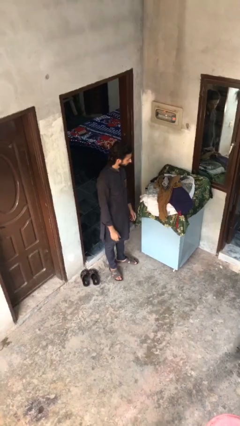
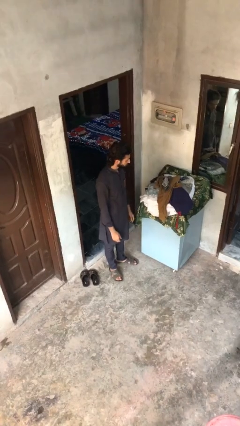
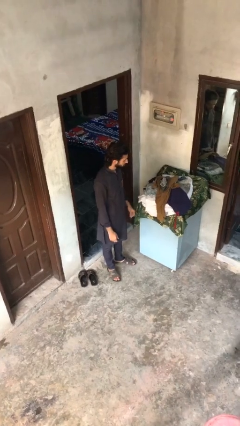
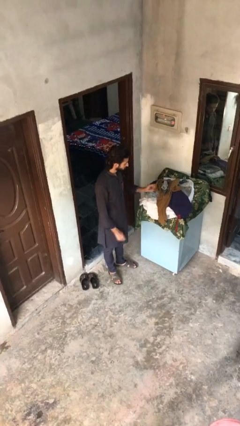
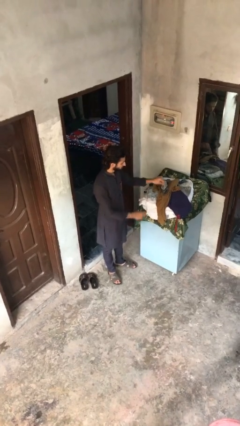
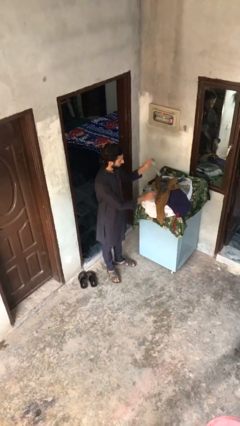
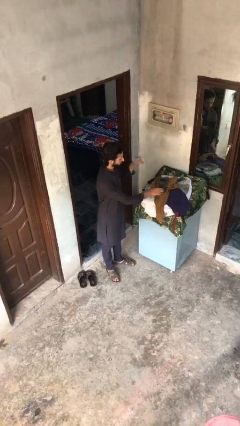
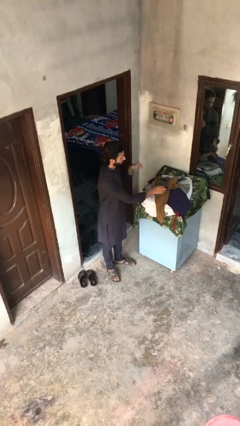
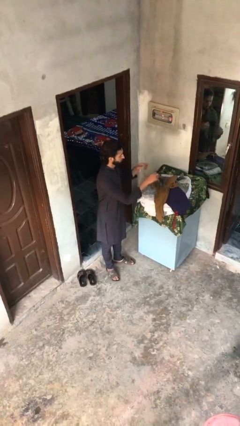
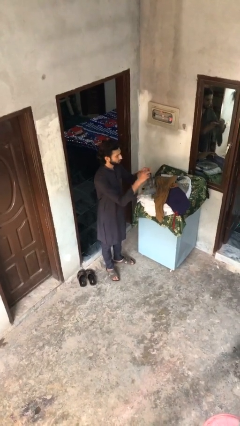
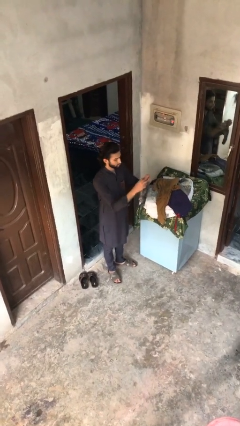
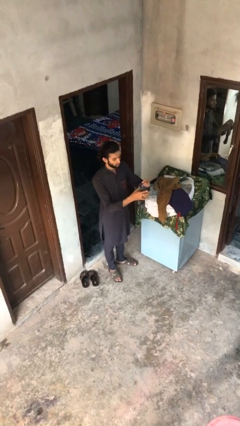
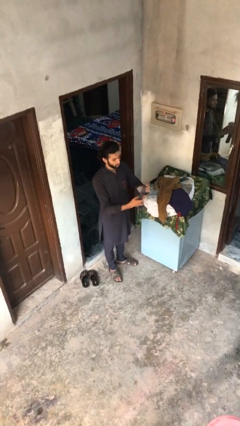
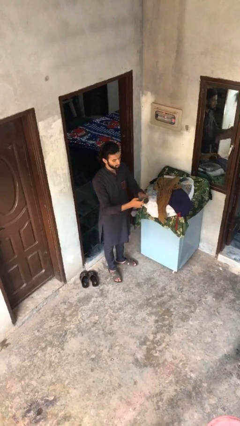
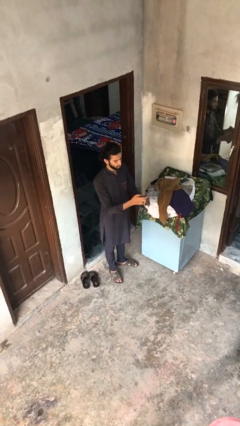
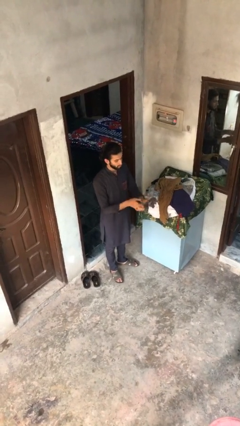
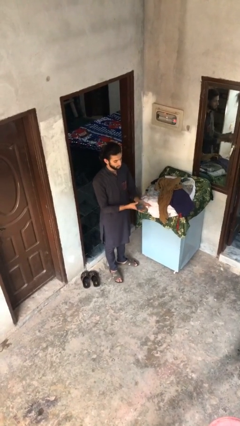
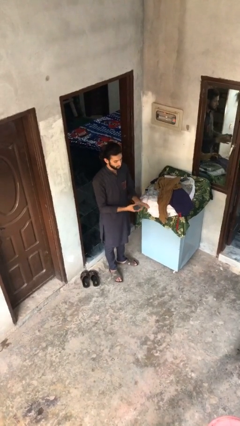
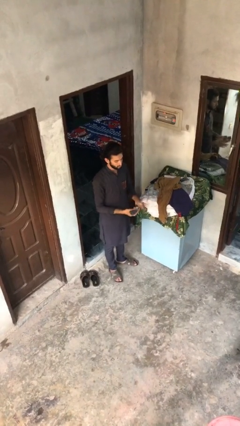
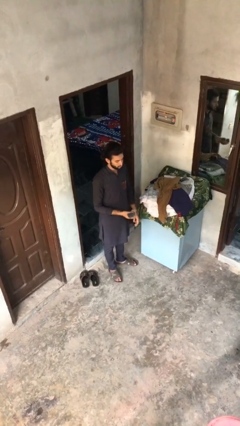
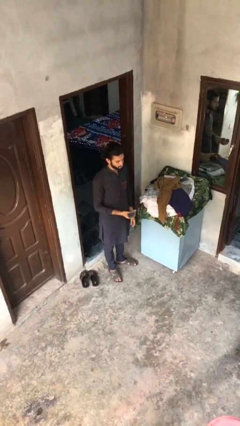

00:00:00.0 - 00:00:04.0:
person folds socks

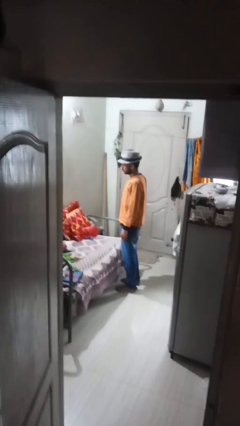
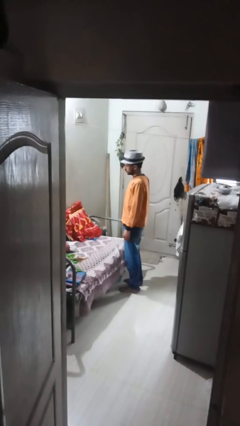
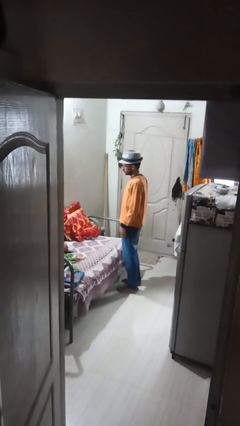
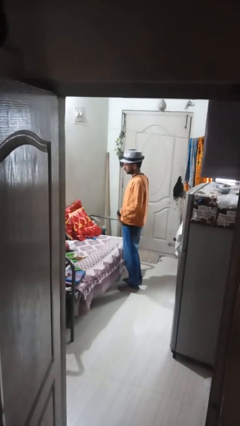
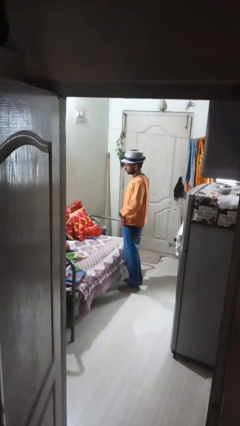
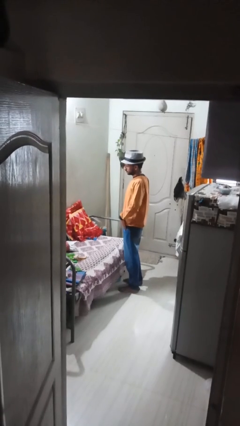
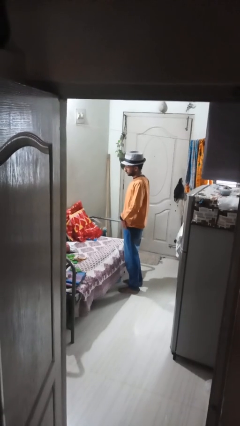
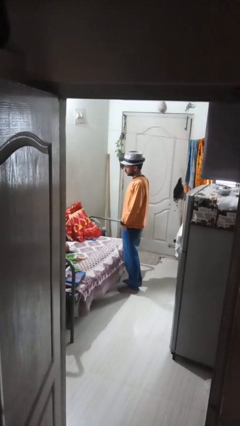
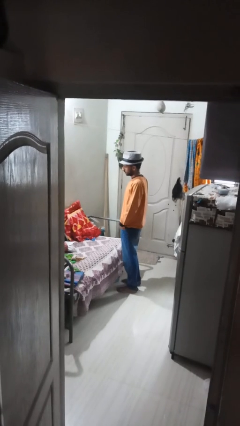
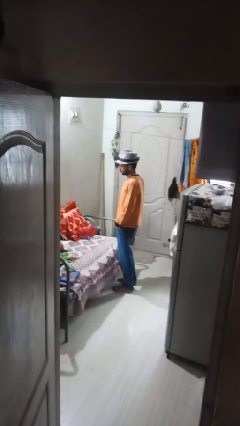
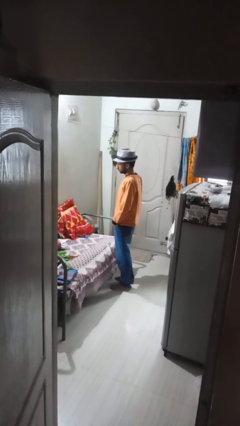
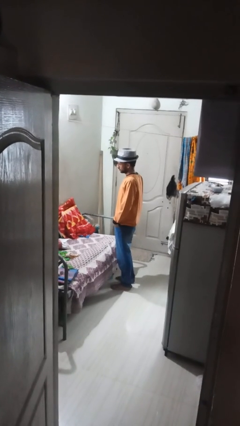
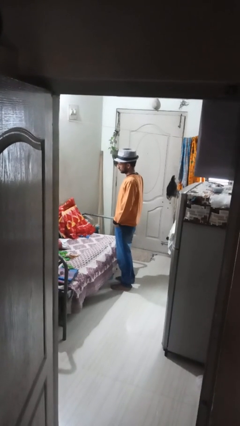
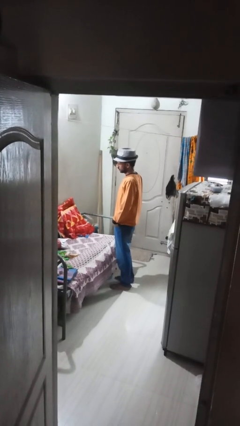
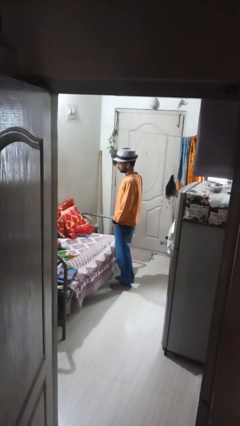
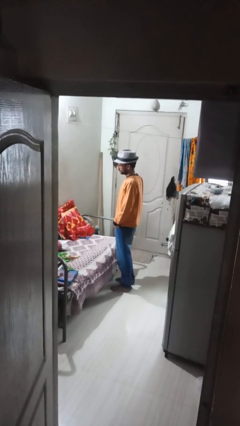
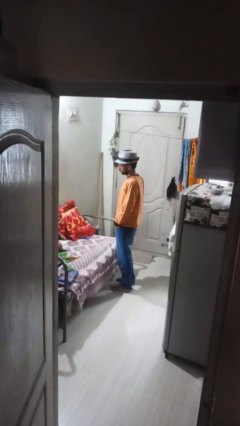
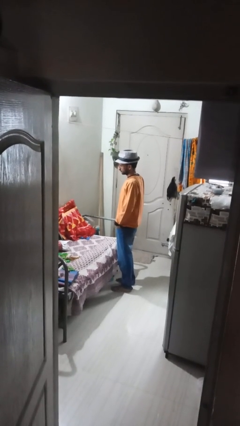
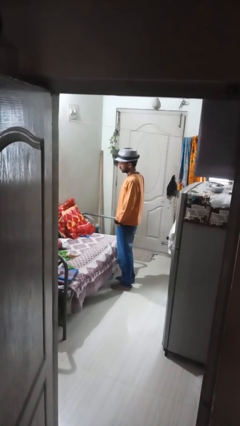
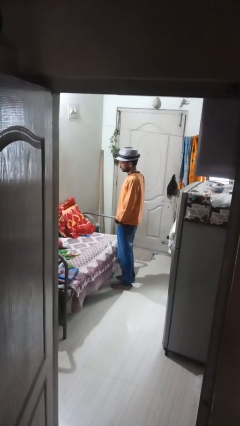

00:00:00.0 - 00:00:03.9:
person puts hands in back pockets

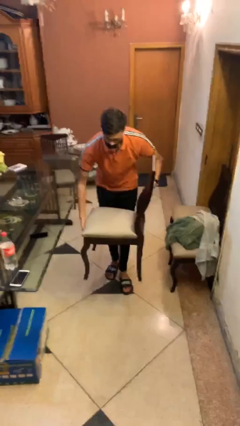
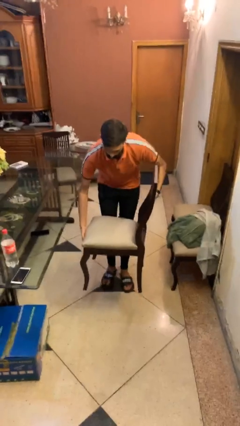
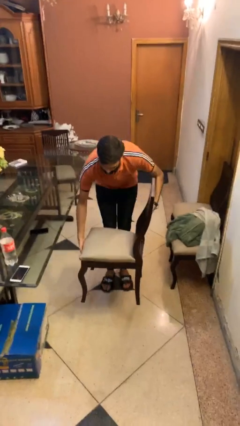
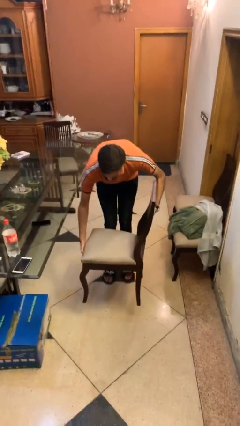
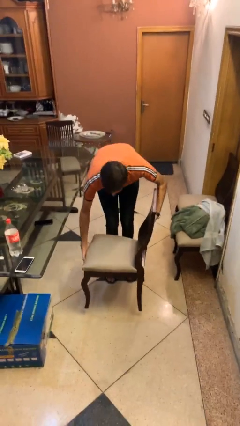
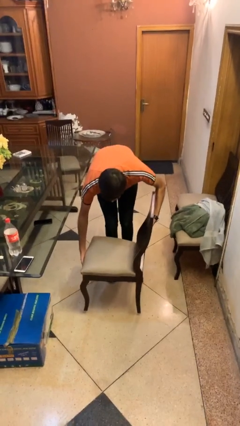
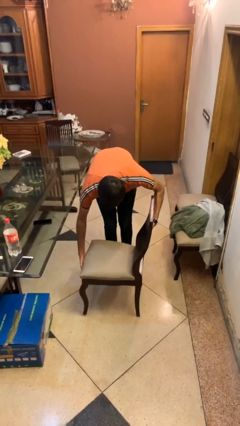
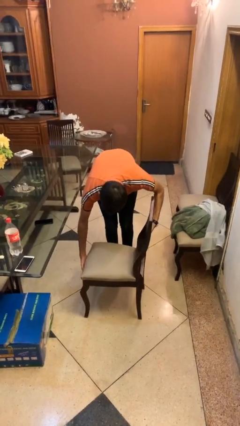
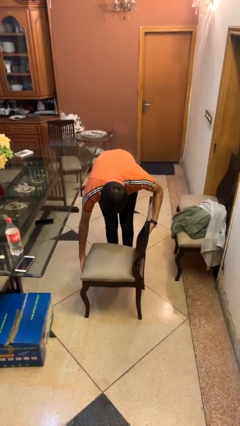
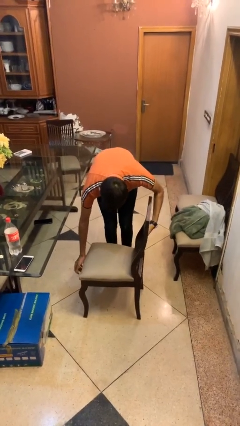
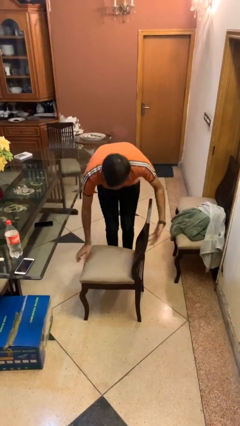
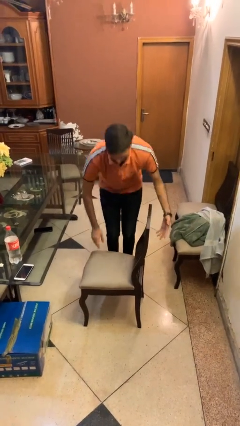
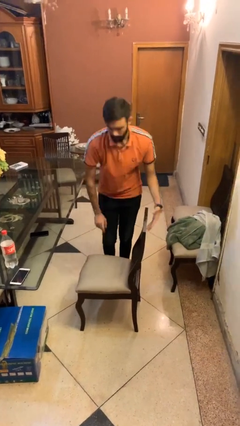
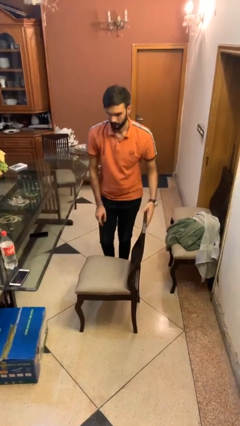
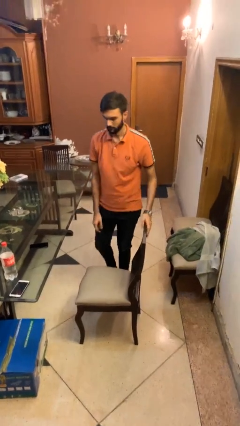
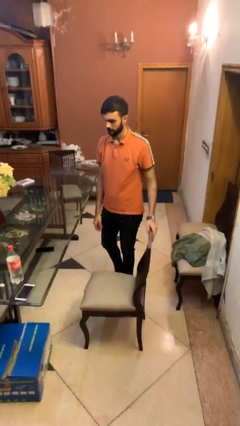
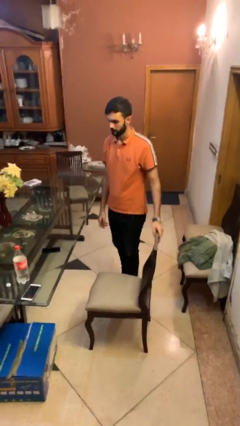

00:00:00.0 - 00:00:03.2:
person puts down object on floor

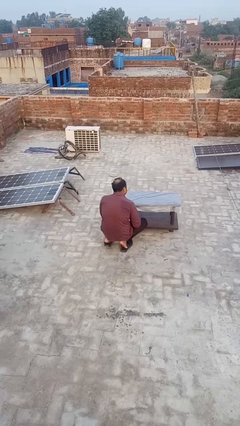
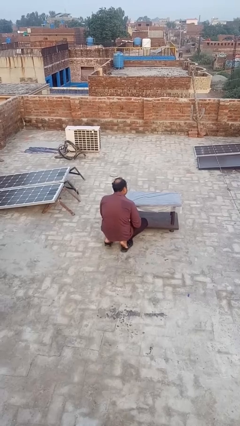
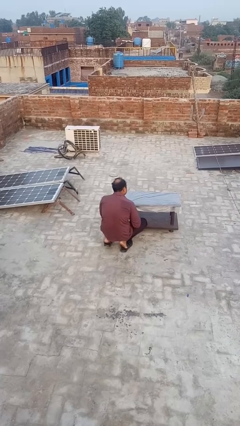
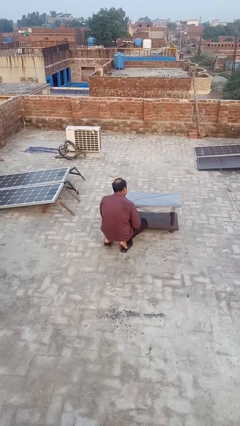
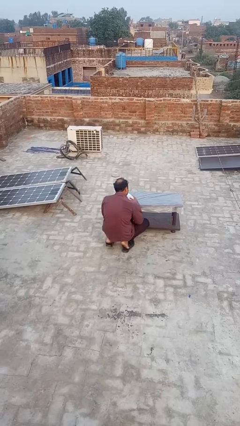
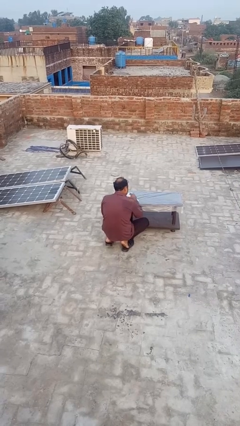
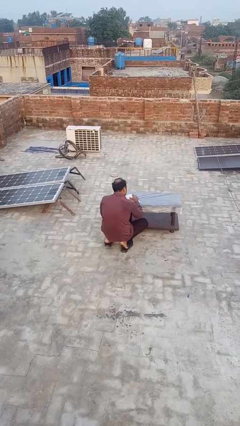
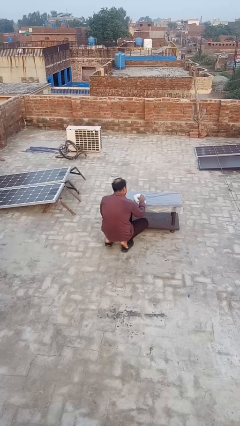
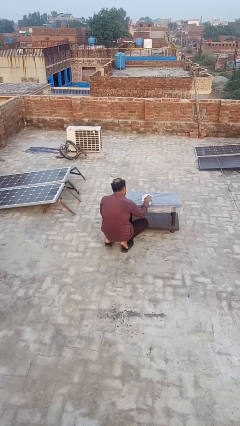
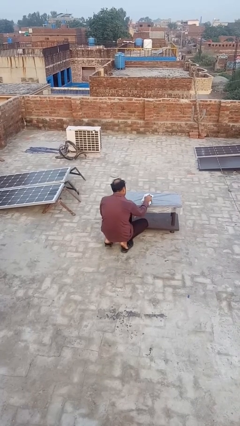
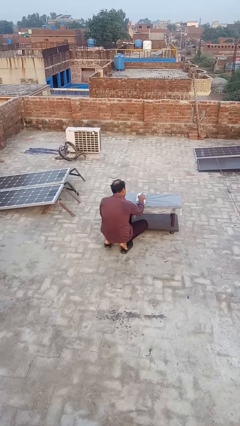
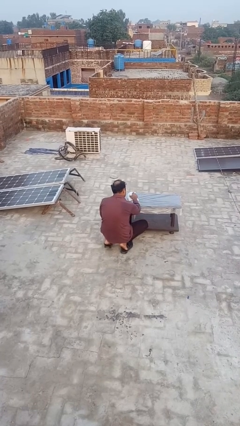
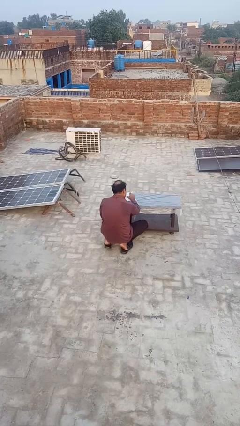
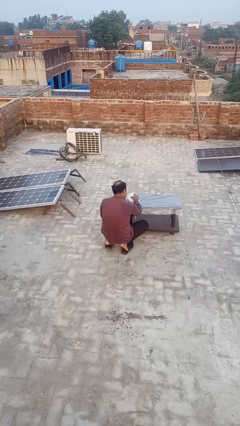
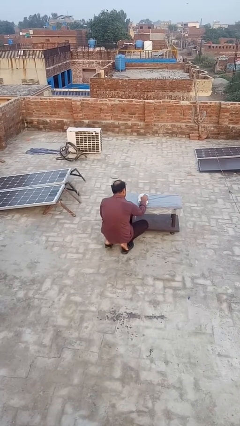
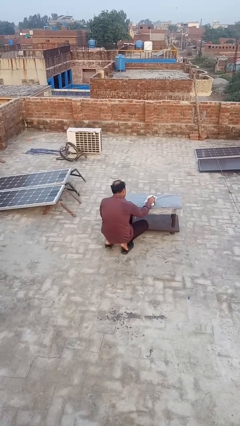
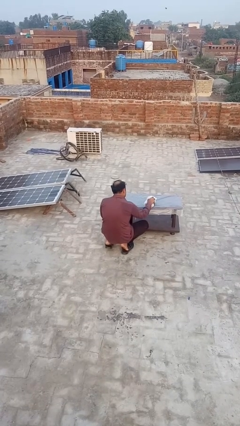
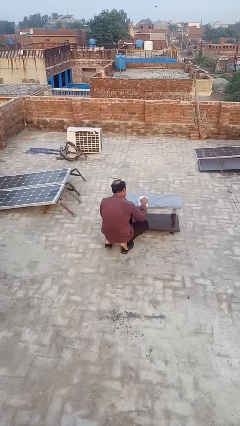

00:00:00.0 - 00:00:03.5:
person cleans table with rag

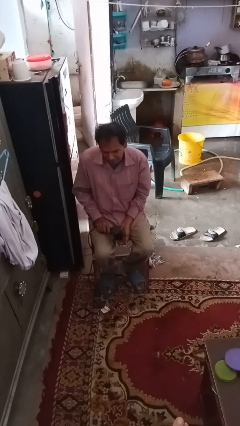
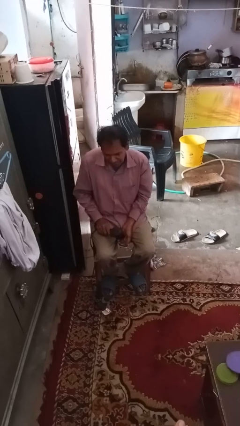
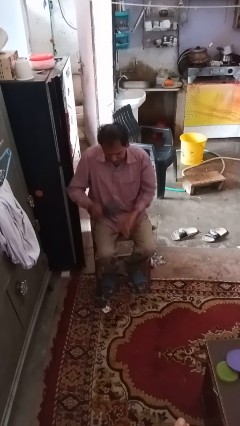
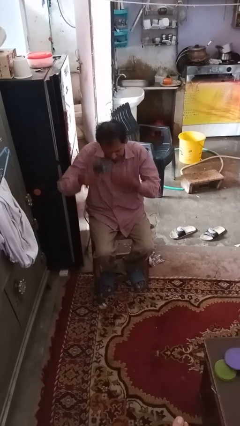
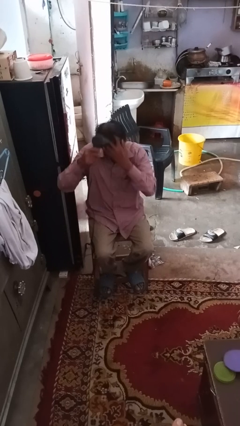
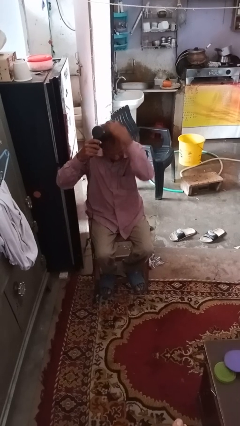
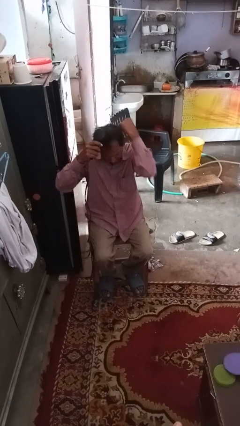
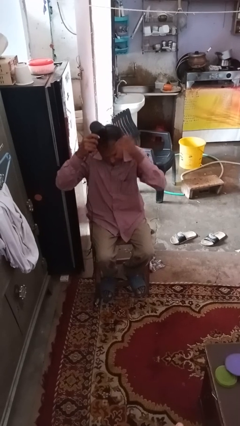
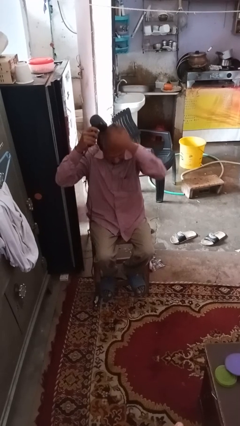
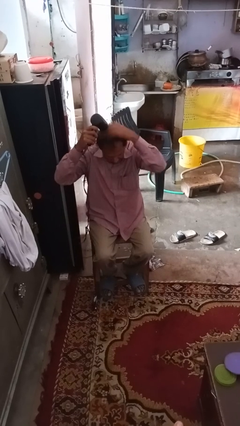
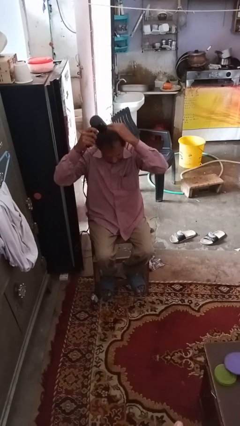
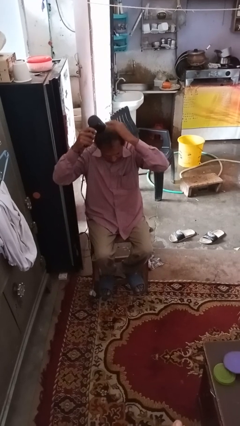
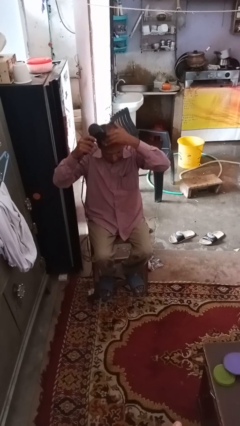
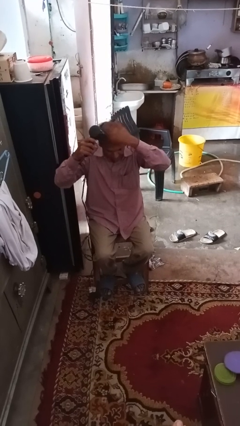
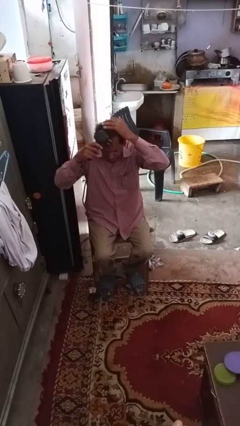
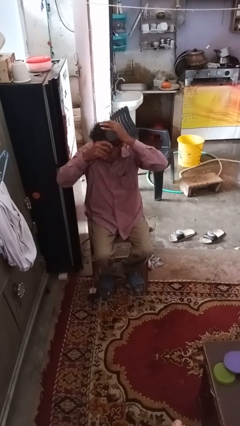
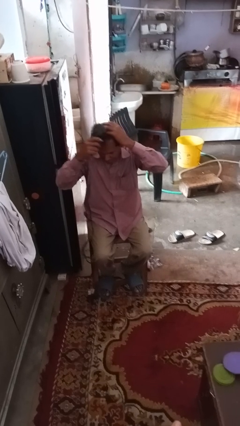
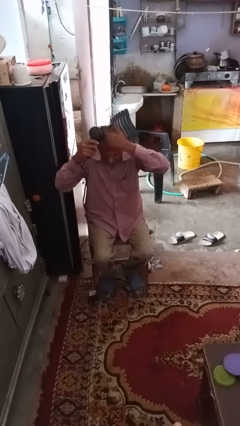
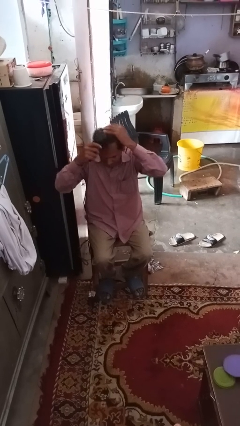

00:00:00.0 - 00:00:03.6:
person dries hair with hairdryer
